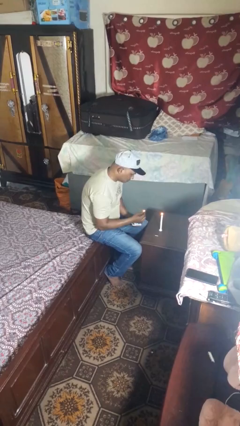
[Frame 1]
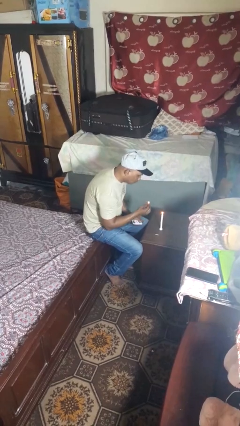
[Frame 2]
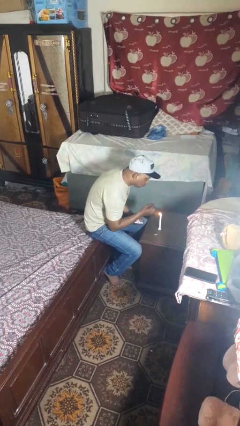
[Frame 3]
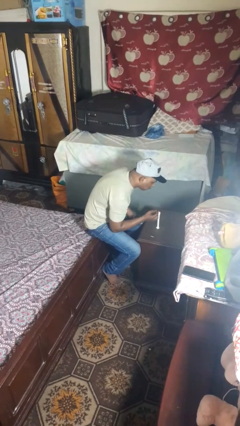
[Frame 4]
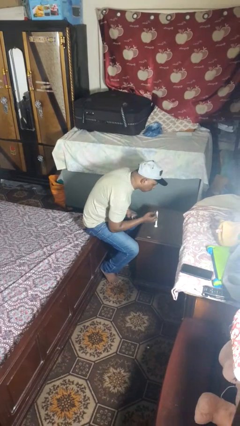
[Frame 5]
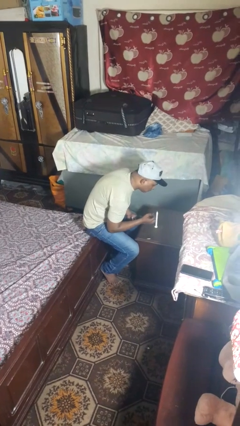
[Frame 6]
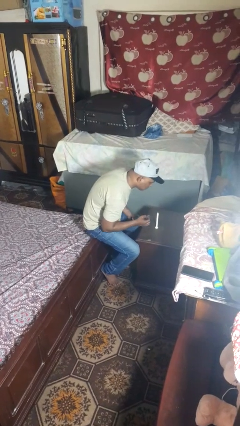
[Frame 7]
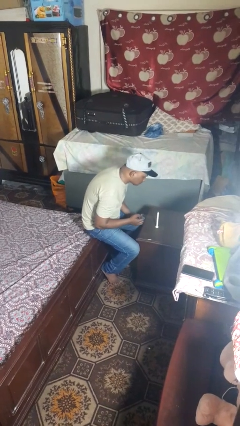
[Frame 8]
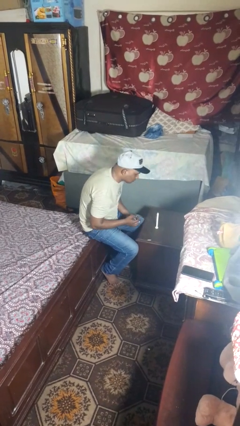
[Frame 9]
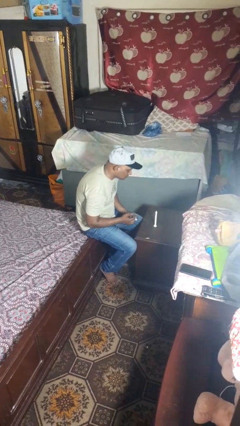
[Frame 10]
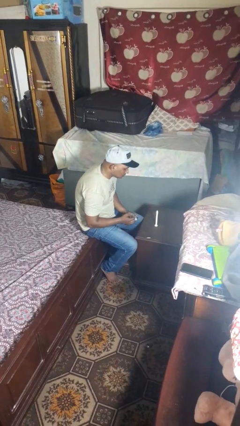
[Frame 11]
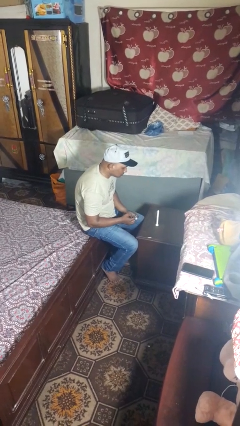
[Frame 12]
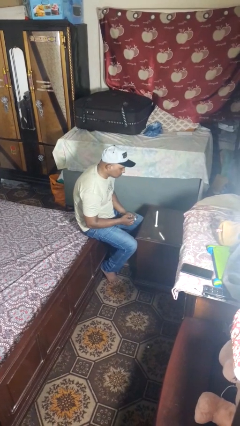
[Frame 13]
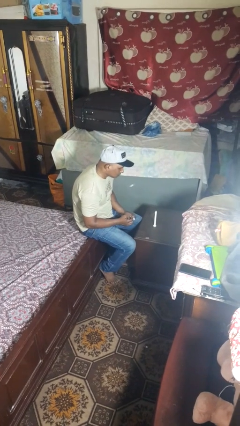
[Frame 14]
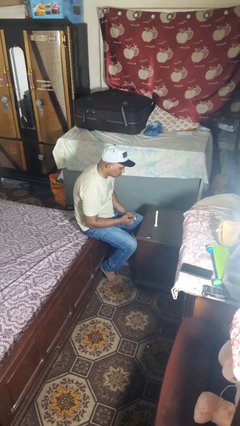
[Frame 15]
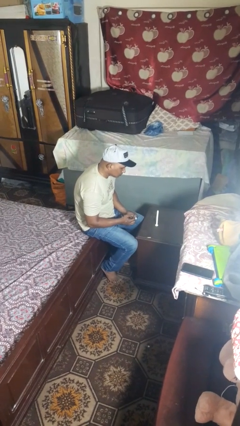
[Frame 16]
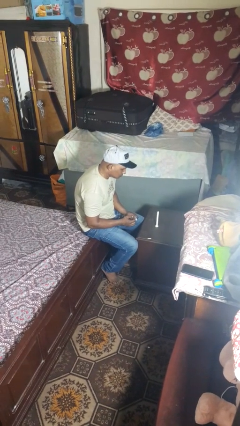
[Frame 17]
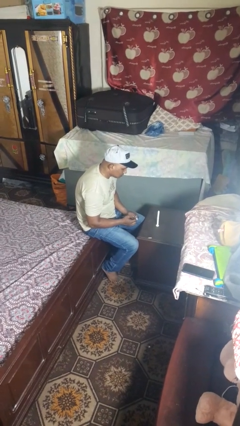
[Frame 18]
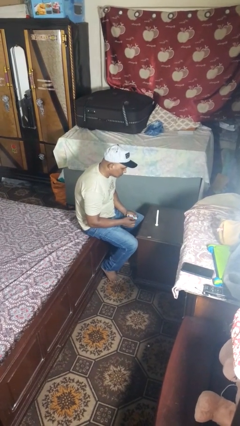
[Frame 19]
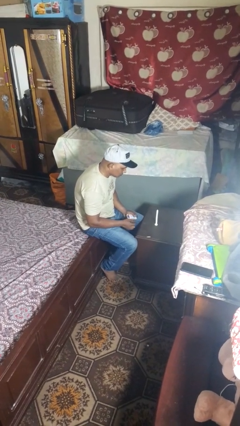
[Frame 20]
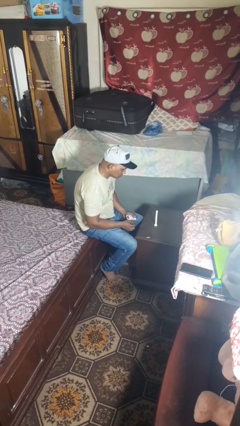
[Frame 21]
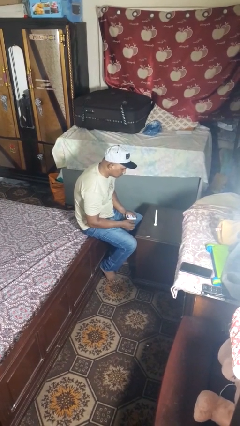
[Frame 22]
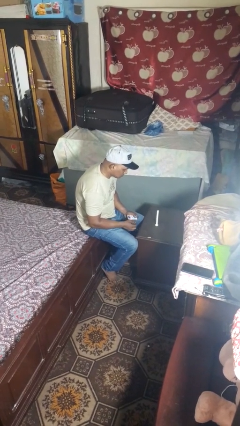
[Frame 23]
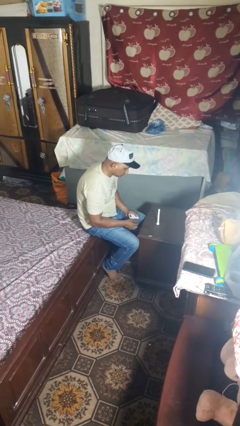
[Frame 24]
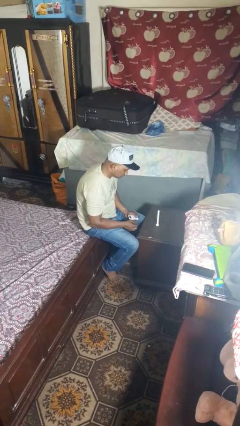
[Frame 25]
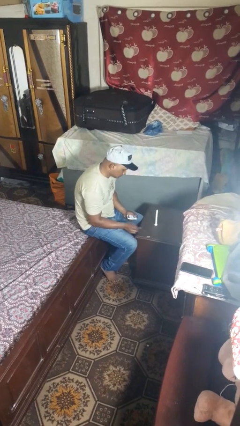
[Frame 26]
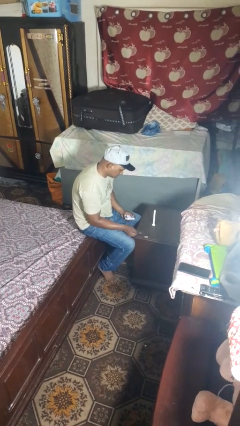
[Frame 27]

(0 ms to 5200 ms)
person extinguishes candle

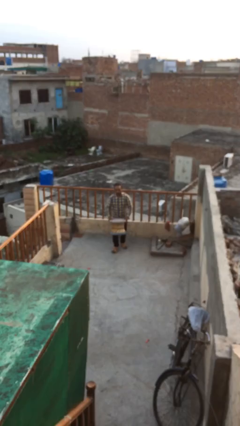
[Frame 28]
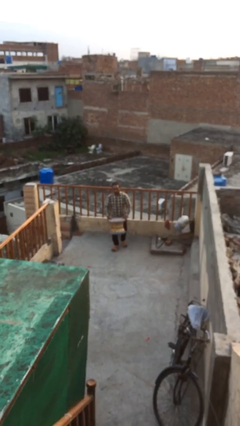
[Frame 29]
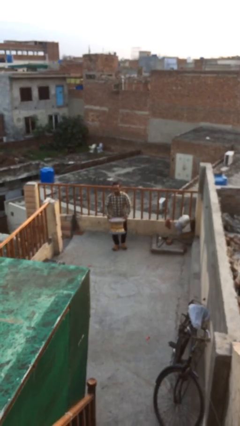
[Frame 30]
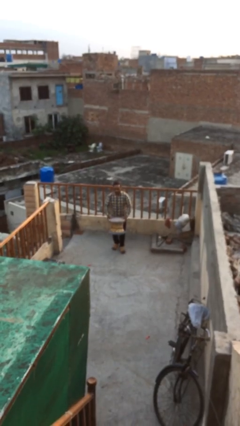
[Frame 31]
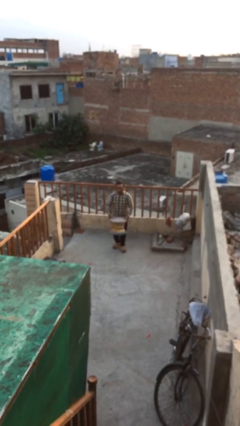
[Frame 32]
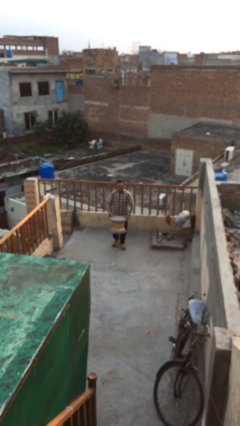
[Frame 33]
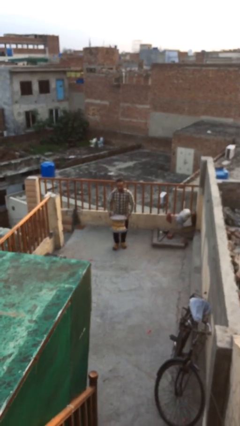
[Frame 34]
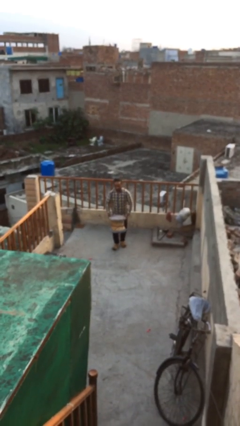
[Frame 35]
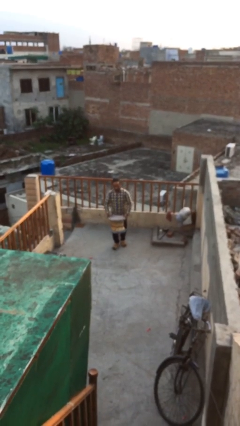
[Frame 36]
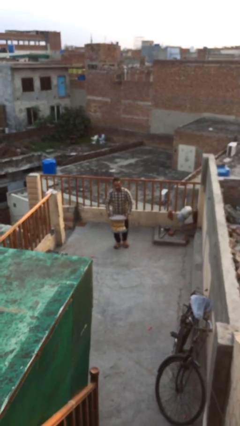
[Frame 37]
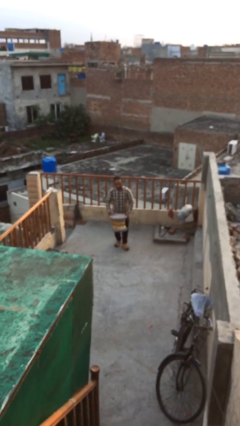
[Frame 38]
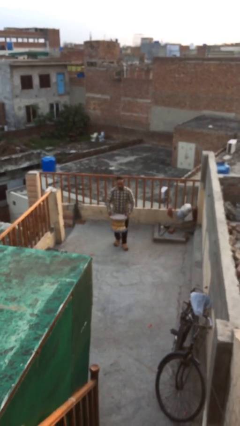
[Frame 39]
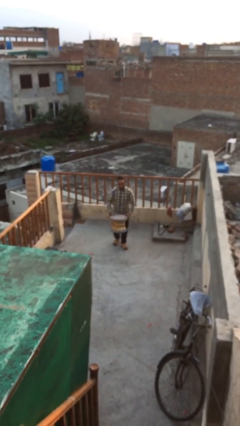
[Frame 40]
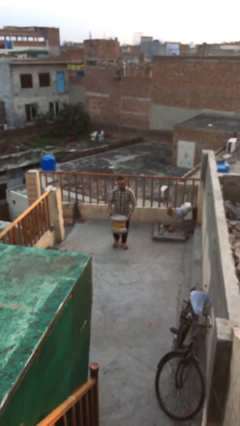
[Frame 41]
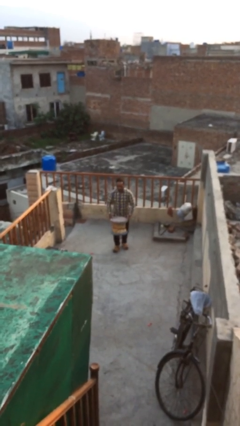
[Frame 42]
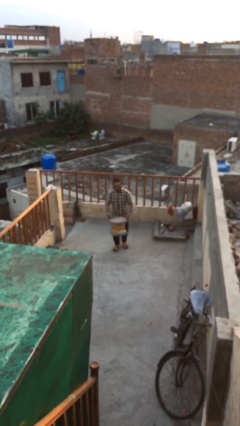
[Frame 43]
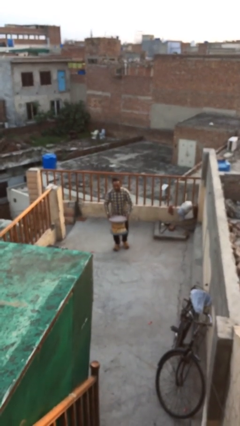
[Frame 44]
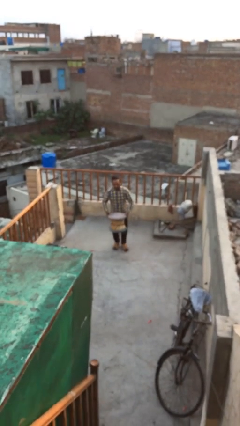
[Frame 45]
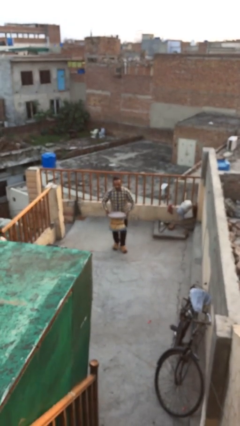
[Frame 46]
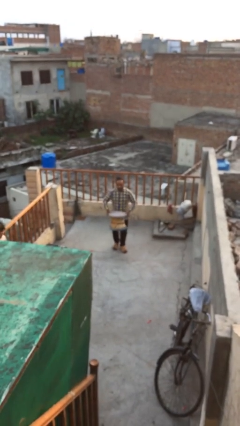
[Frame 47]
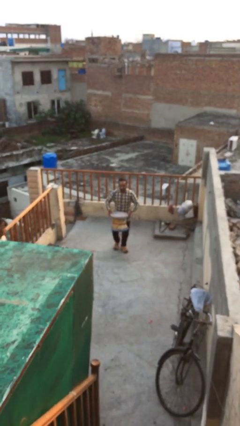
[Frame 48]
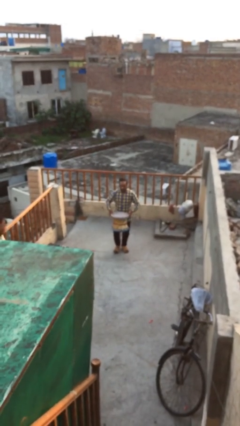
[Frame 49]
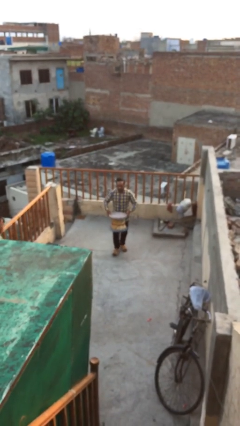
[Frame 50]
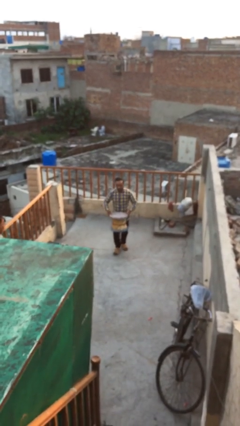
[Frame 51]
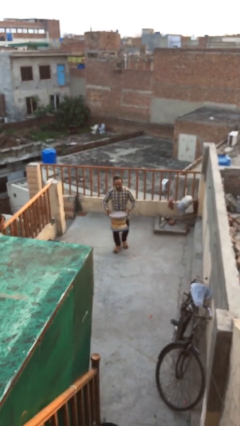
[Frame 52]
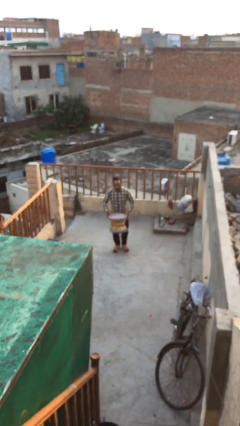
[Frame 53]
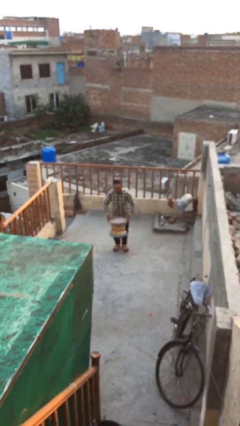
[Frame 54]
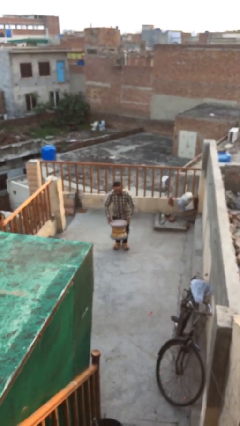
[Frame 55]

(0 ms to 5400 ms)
person carries heavy object

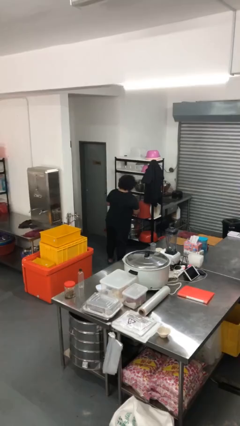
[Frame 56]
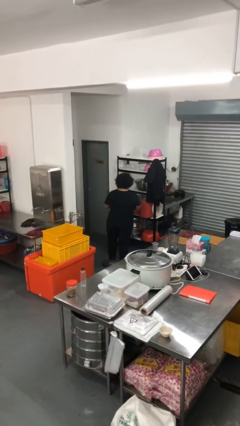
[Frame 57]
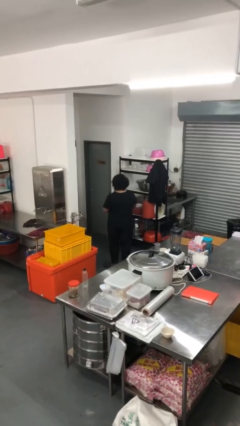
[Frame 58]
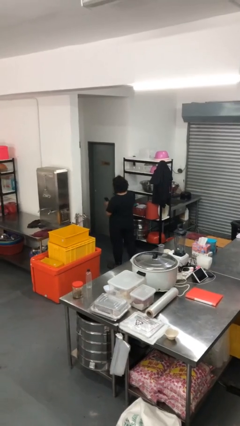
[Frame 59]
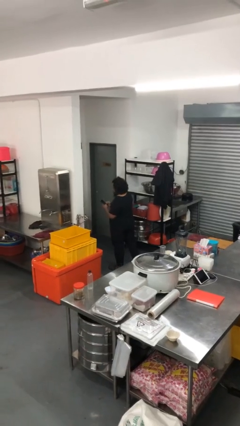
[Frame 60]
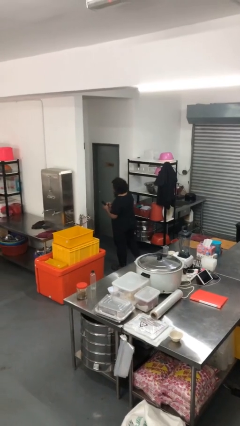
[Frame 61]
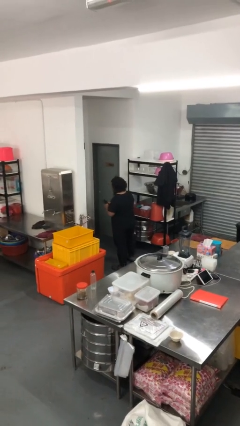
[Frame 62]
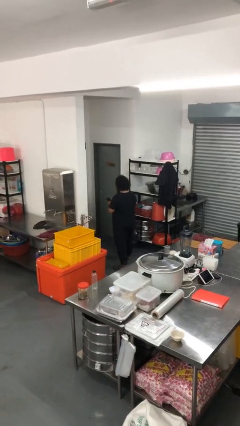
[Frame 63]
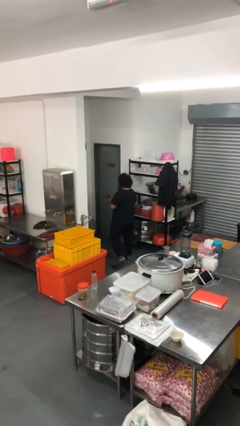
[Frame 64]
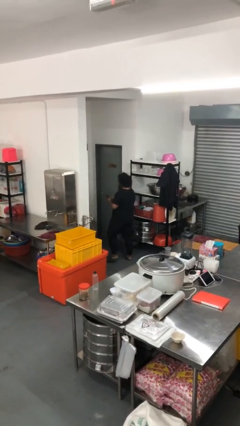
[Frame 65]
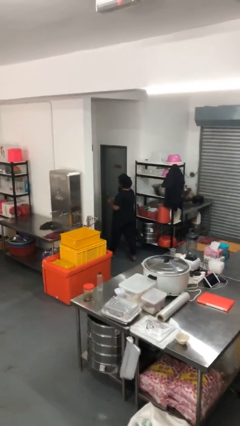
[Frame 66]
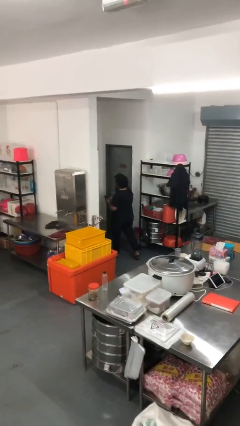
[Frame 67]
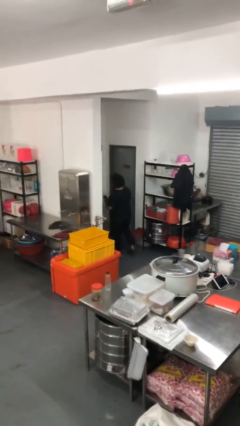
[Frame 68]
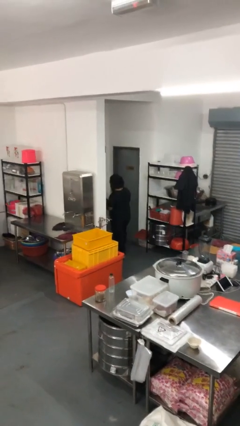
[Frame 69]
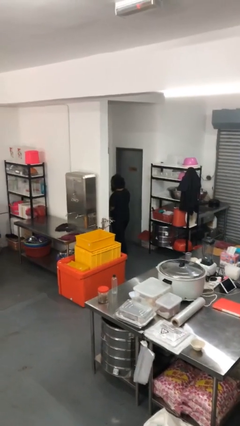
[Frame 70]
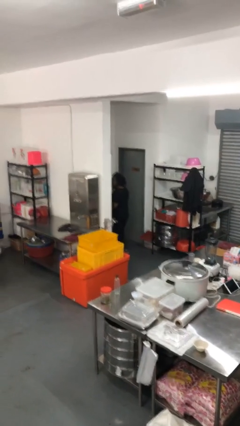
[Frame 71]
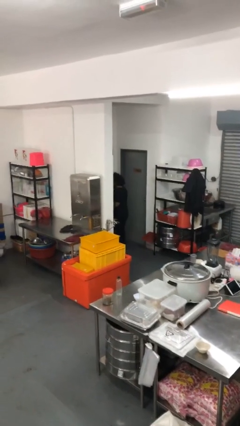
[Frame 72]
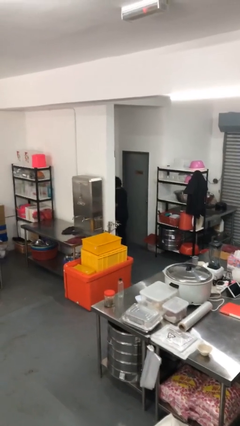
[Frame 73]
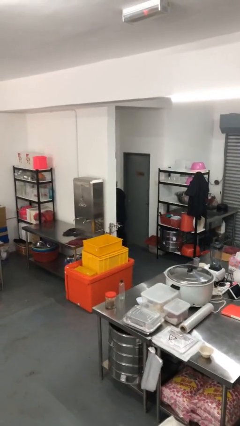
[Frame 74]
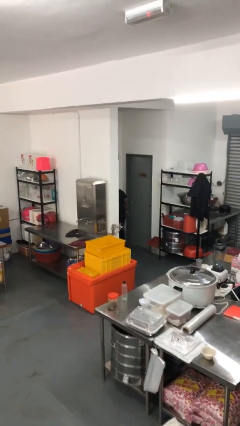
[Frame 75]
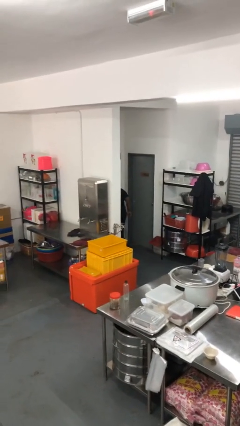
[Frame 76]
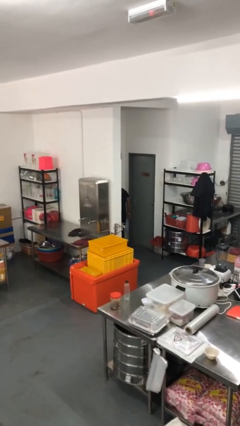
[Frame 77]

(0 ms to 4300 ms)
person exits scene through structure

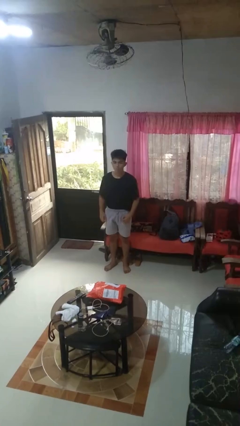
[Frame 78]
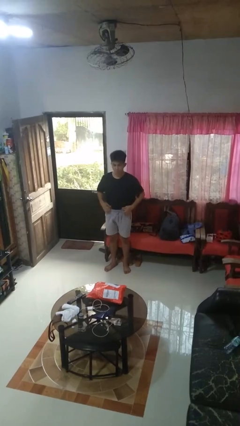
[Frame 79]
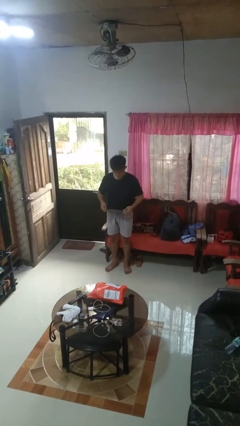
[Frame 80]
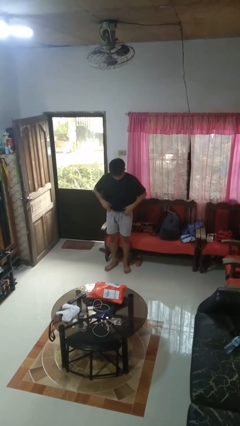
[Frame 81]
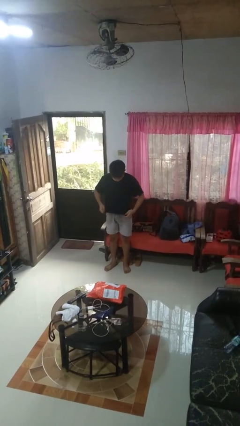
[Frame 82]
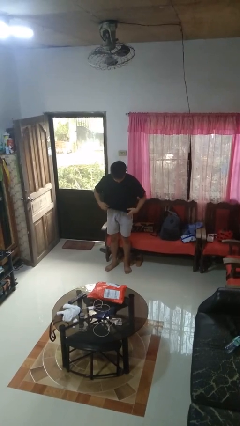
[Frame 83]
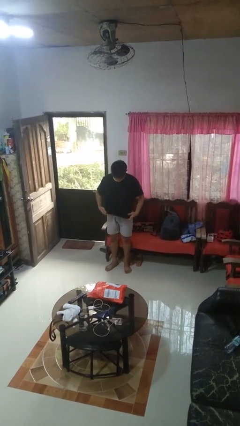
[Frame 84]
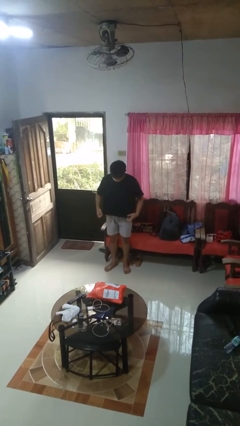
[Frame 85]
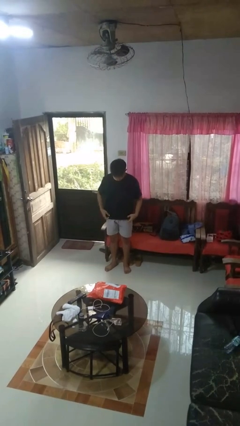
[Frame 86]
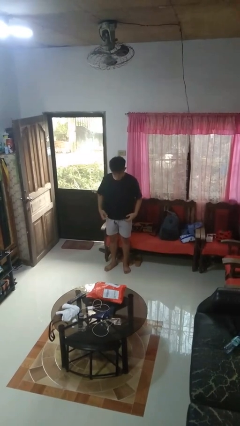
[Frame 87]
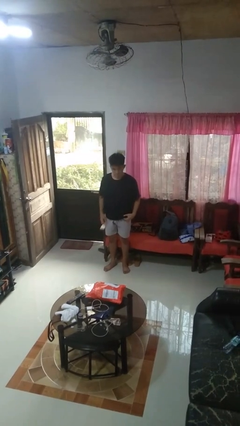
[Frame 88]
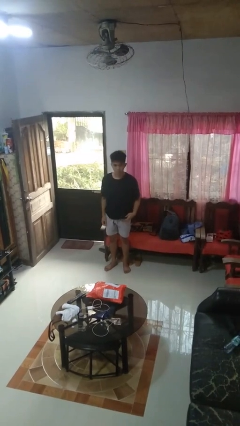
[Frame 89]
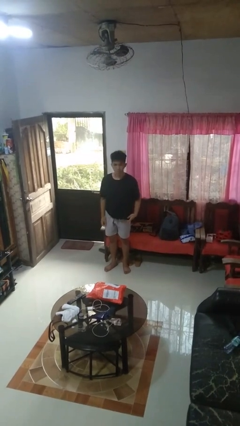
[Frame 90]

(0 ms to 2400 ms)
person untucks shirt

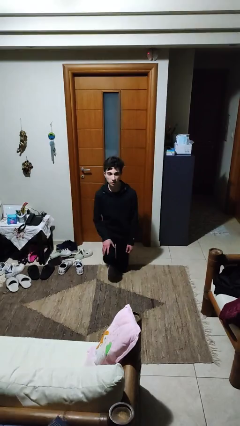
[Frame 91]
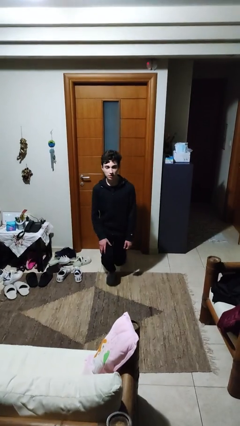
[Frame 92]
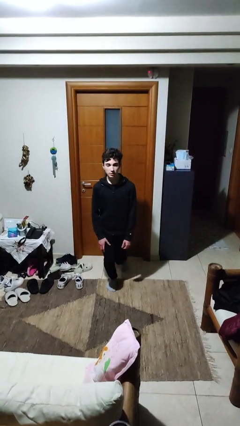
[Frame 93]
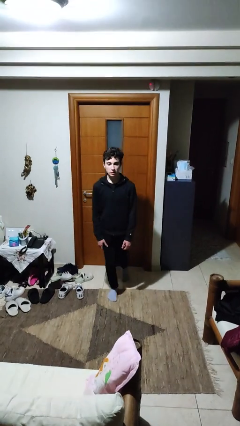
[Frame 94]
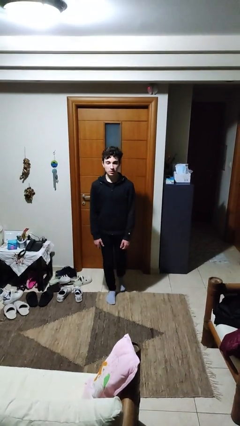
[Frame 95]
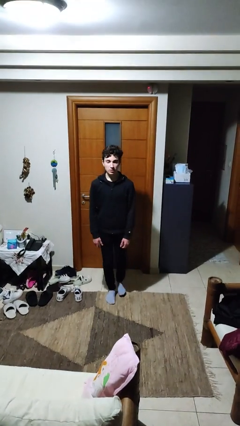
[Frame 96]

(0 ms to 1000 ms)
person stands up from floor
